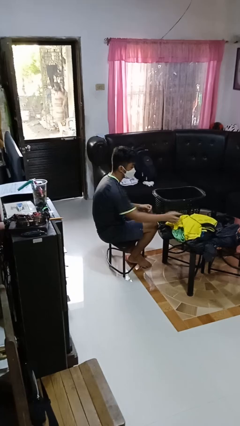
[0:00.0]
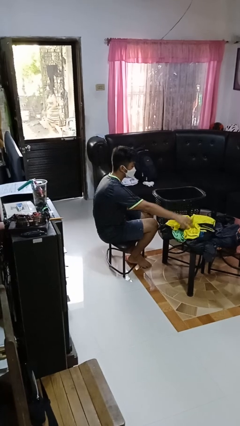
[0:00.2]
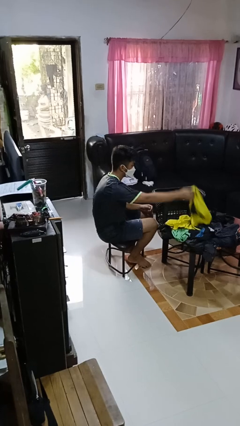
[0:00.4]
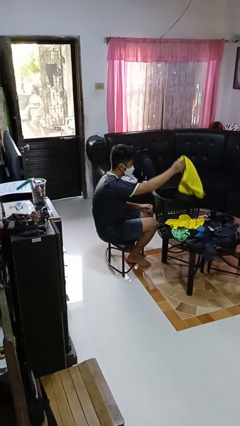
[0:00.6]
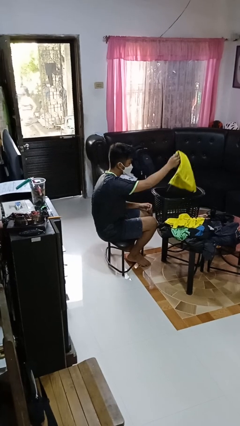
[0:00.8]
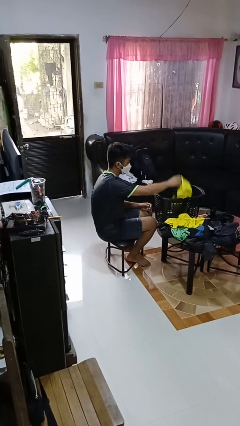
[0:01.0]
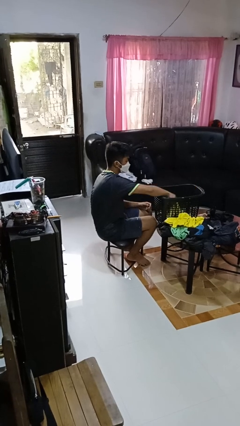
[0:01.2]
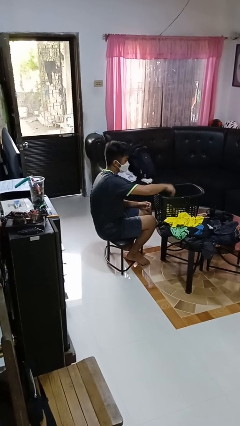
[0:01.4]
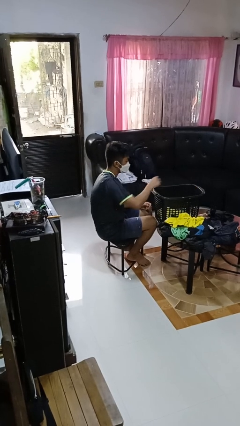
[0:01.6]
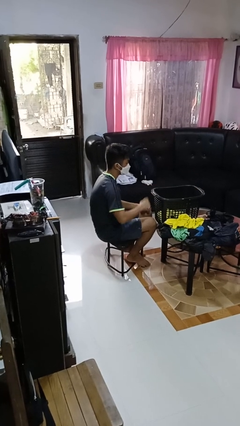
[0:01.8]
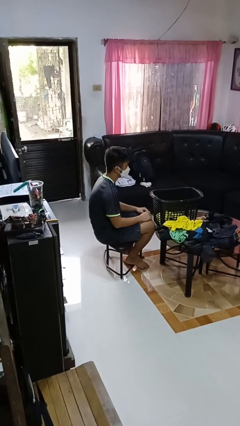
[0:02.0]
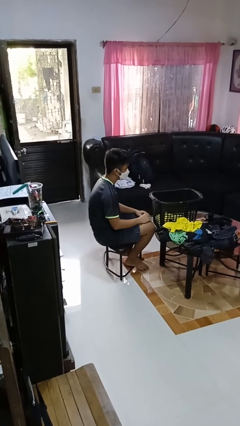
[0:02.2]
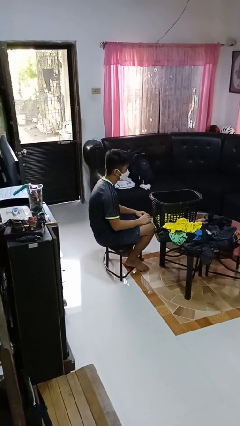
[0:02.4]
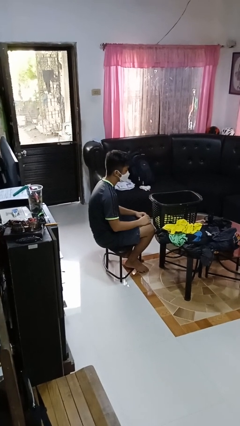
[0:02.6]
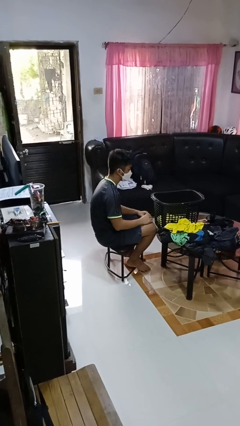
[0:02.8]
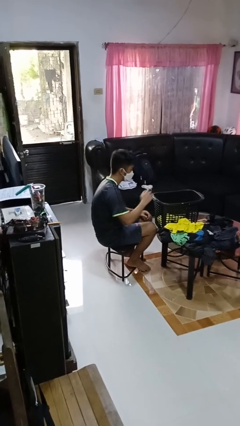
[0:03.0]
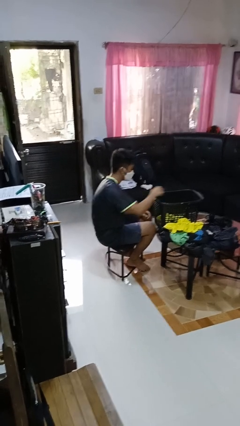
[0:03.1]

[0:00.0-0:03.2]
person puts object into basket

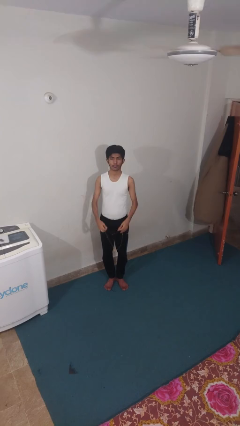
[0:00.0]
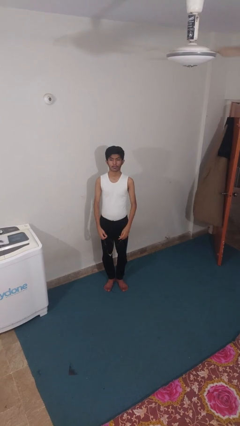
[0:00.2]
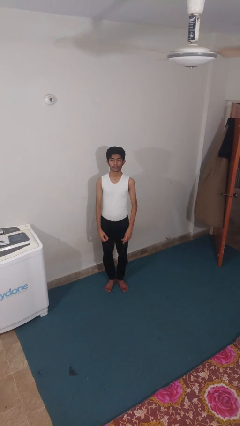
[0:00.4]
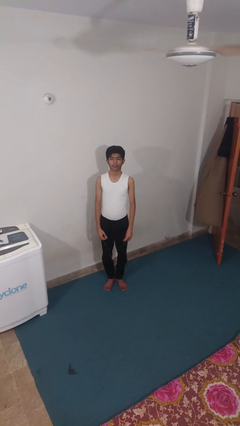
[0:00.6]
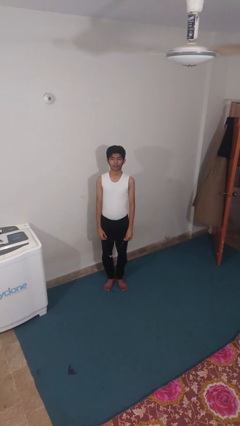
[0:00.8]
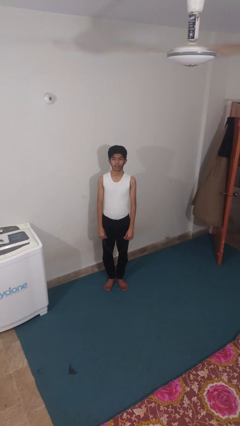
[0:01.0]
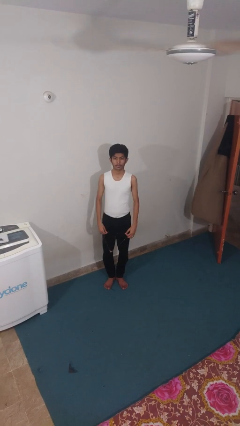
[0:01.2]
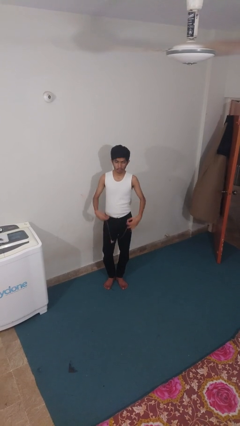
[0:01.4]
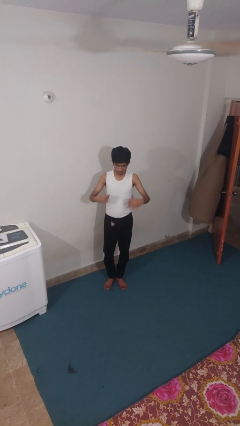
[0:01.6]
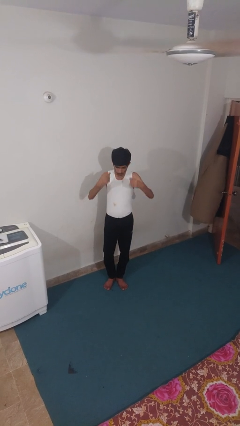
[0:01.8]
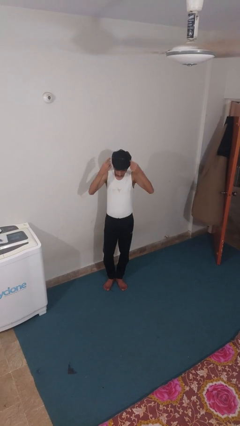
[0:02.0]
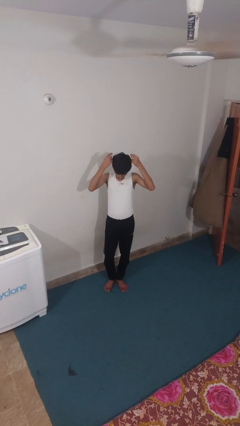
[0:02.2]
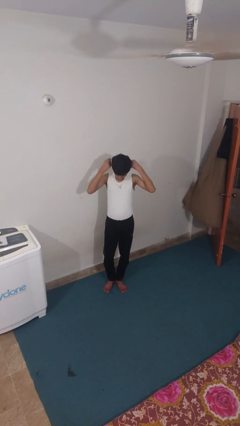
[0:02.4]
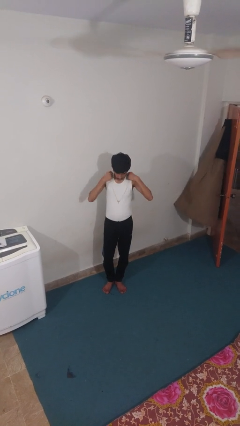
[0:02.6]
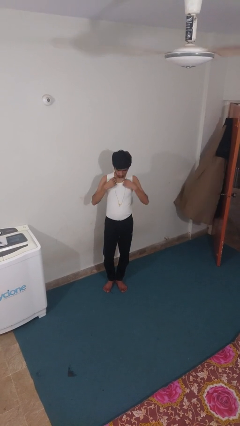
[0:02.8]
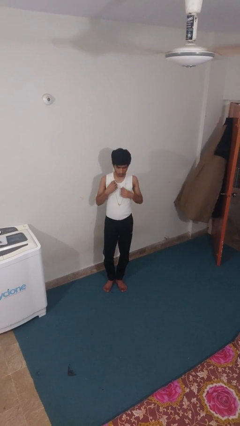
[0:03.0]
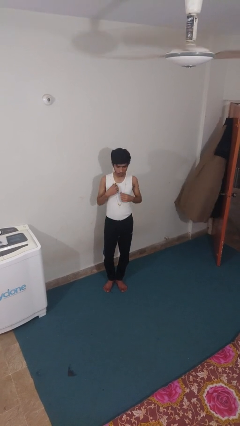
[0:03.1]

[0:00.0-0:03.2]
person puts on necklace

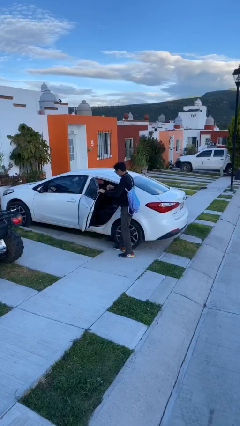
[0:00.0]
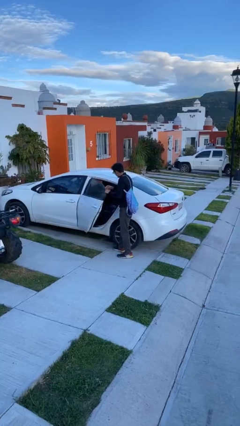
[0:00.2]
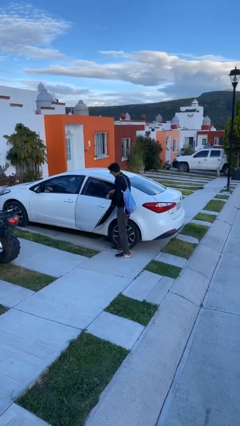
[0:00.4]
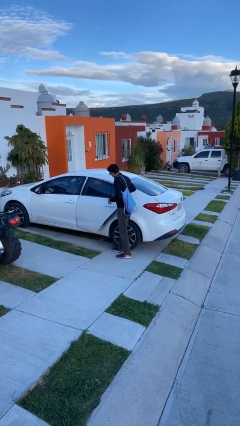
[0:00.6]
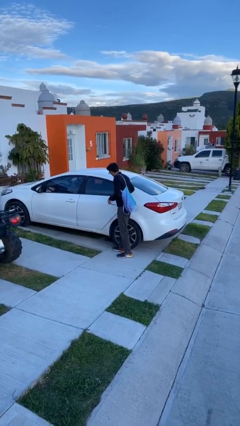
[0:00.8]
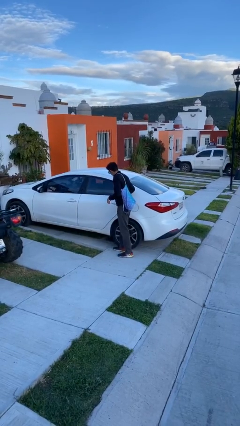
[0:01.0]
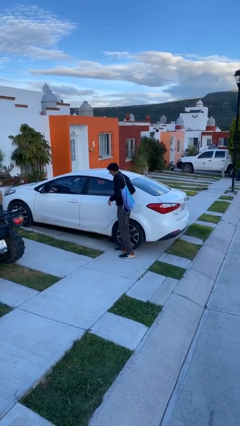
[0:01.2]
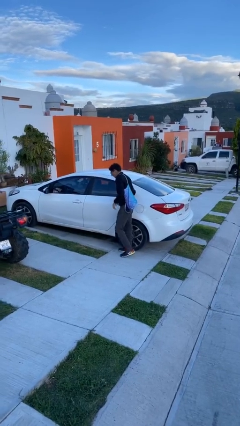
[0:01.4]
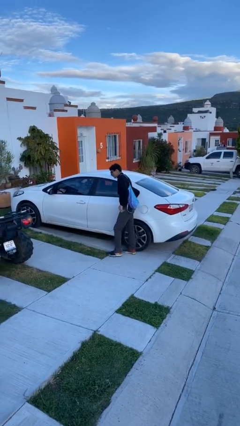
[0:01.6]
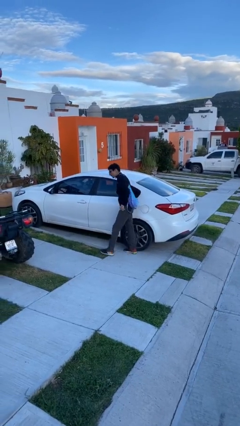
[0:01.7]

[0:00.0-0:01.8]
person closes car door

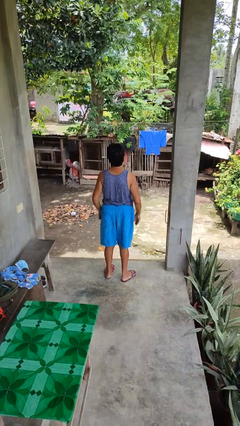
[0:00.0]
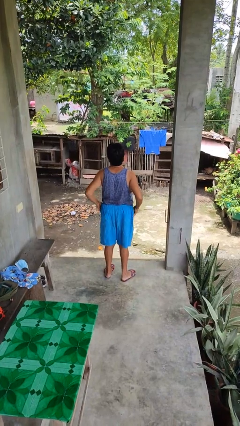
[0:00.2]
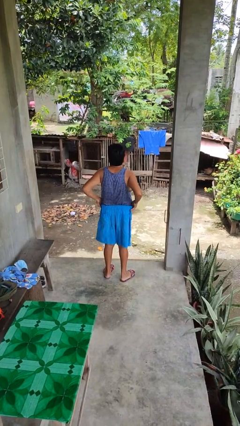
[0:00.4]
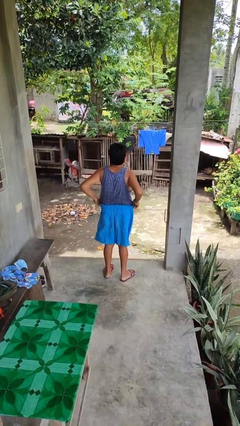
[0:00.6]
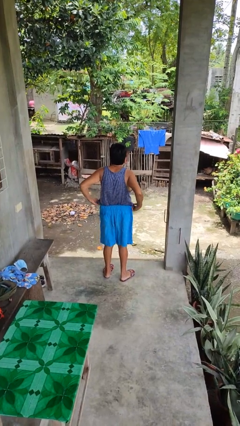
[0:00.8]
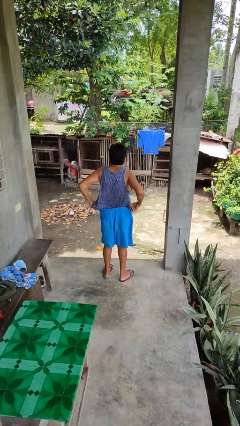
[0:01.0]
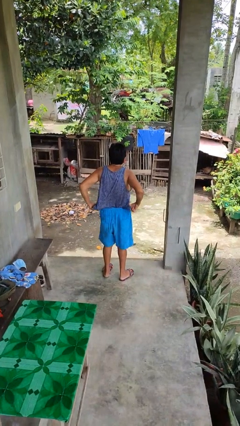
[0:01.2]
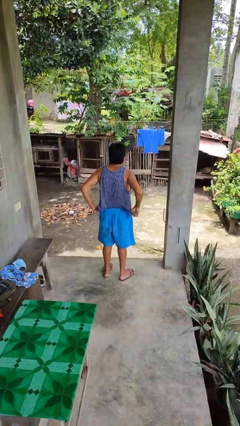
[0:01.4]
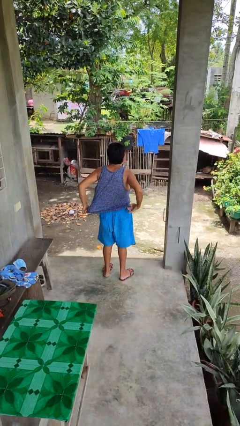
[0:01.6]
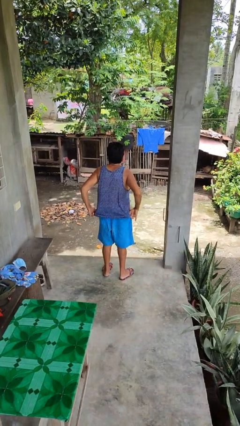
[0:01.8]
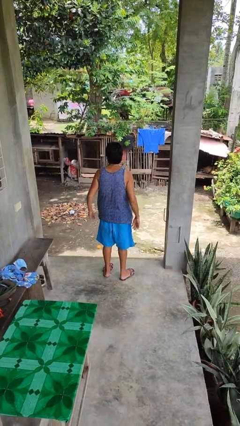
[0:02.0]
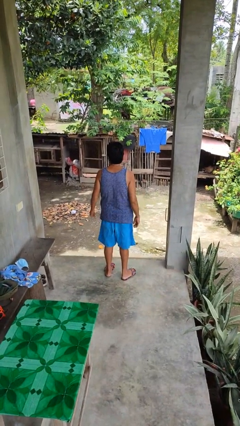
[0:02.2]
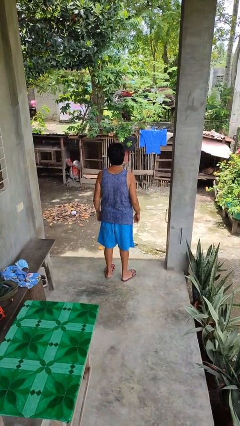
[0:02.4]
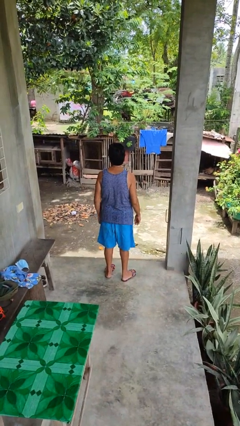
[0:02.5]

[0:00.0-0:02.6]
person untucks shirt

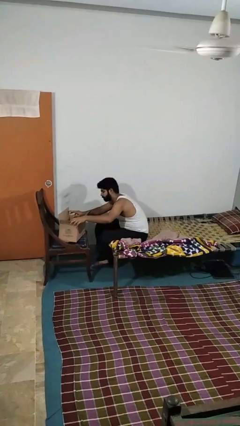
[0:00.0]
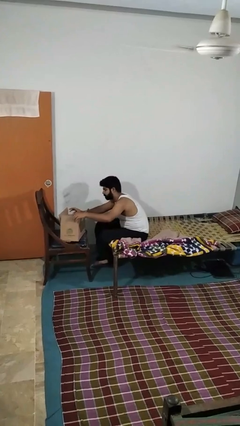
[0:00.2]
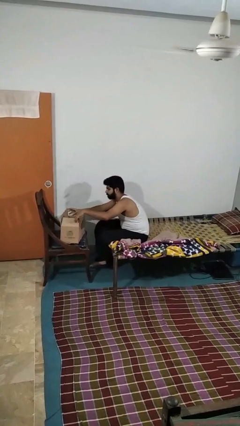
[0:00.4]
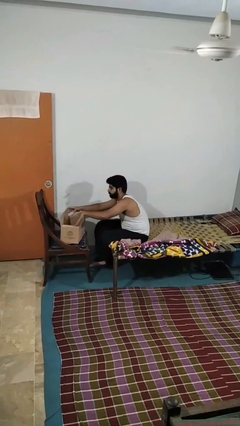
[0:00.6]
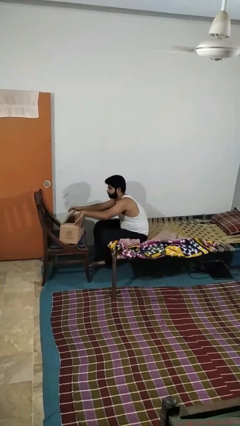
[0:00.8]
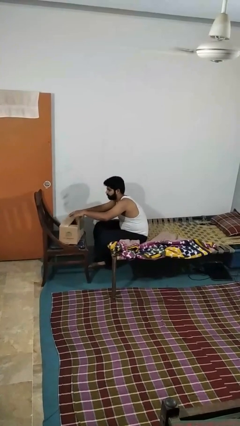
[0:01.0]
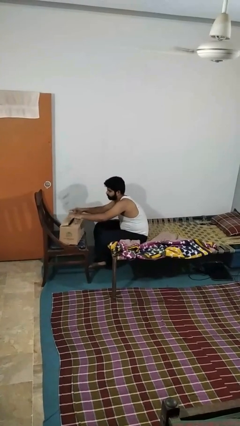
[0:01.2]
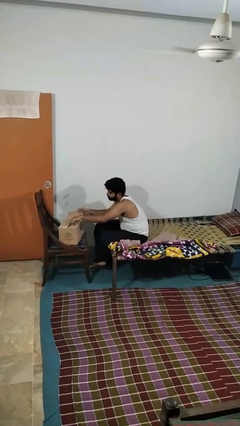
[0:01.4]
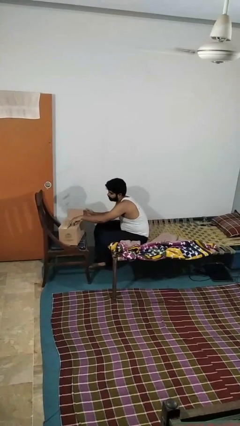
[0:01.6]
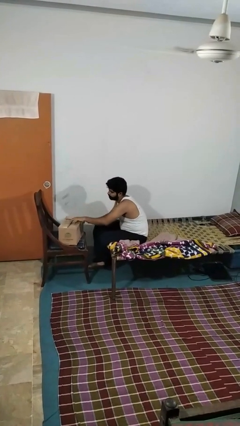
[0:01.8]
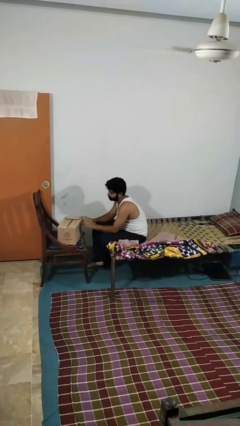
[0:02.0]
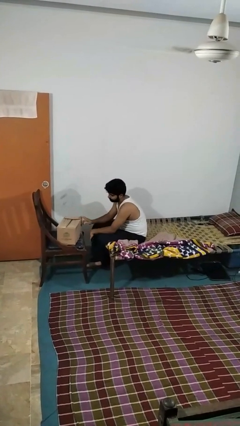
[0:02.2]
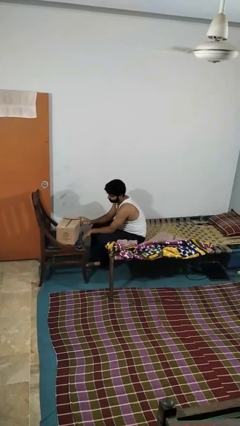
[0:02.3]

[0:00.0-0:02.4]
person closes box

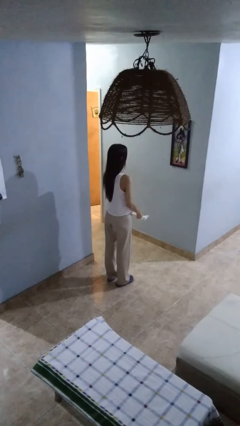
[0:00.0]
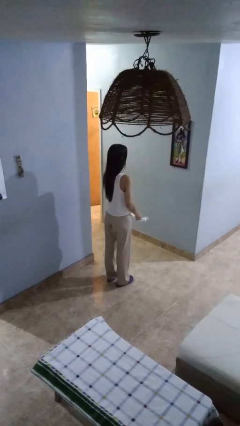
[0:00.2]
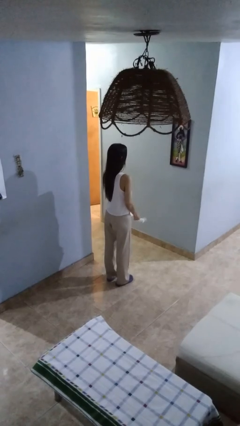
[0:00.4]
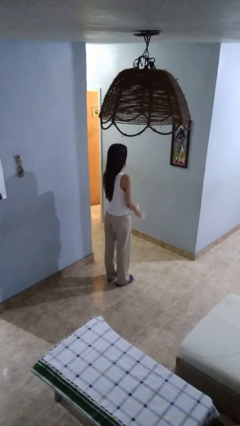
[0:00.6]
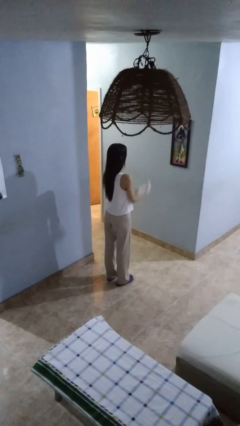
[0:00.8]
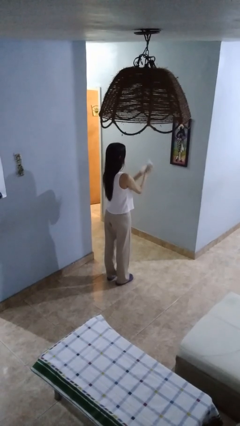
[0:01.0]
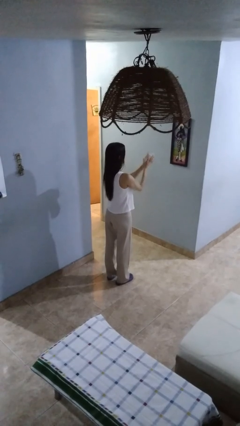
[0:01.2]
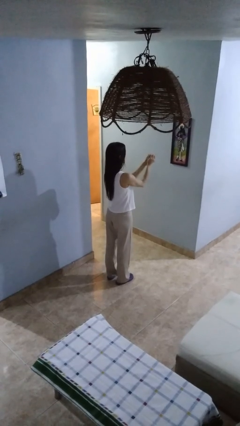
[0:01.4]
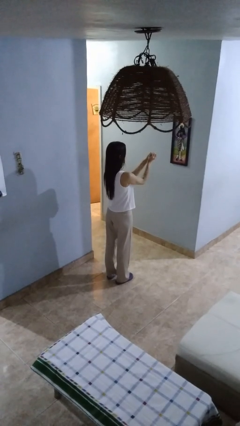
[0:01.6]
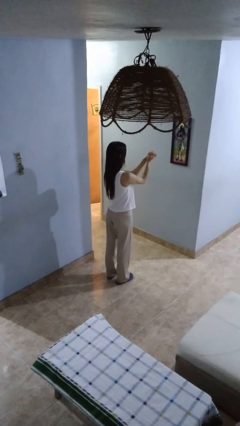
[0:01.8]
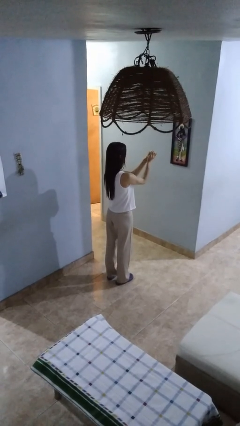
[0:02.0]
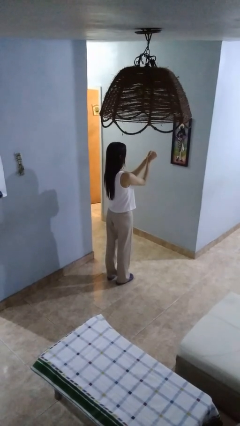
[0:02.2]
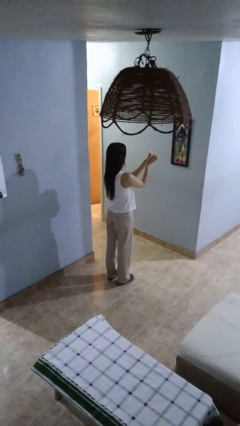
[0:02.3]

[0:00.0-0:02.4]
person crumples paper

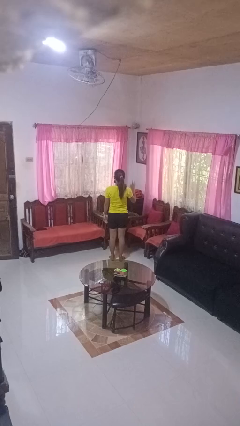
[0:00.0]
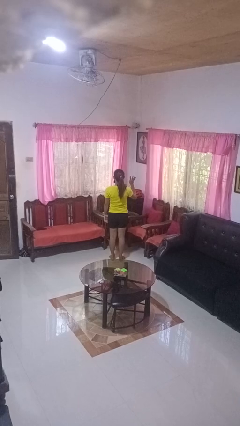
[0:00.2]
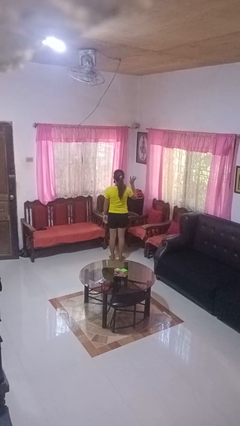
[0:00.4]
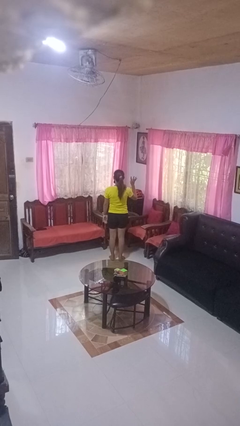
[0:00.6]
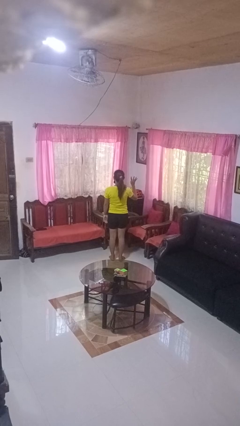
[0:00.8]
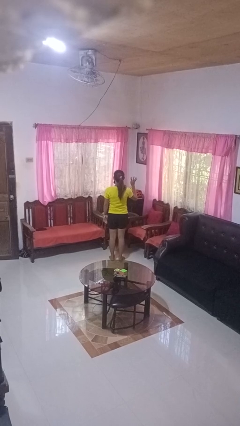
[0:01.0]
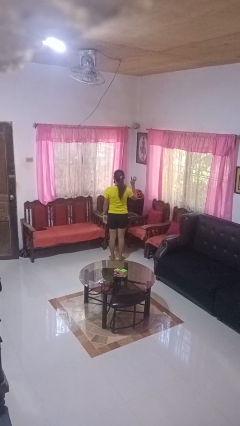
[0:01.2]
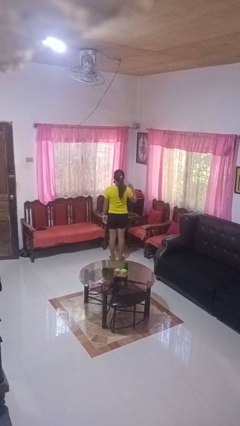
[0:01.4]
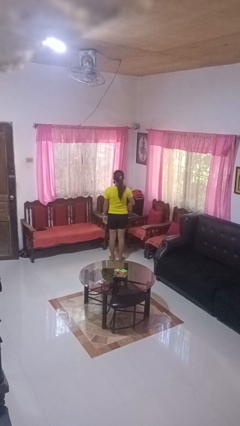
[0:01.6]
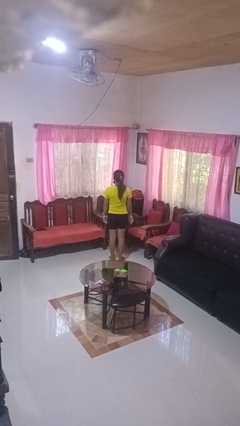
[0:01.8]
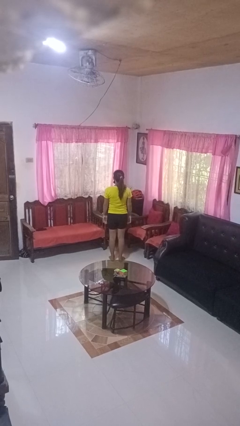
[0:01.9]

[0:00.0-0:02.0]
person gestures number four
